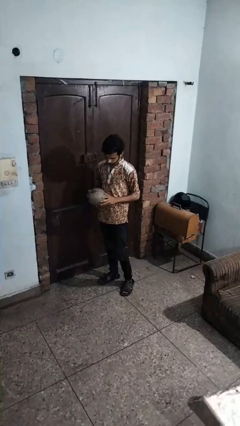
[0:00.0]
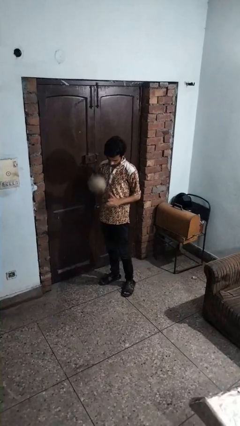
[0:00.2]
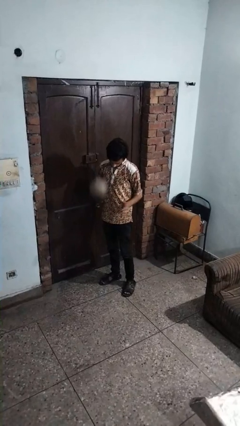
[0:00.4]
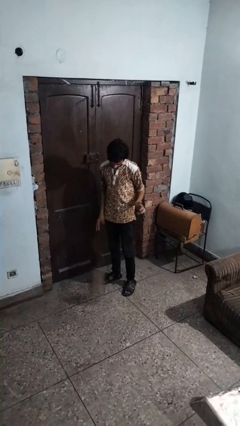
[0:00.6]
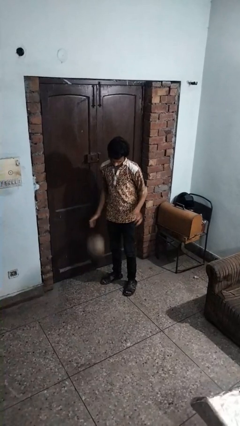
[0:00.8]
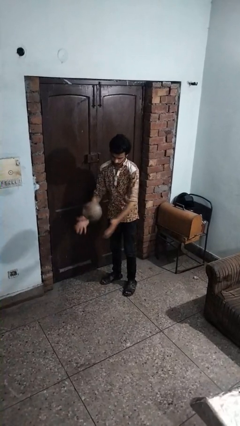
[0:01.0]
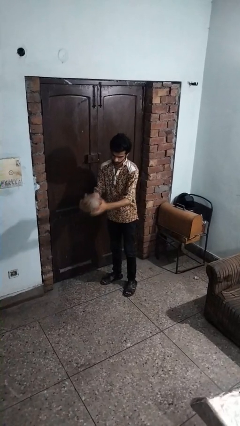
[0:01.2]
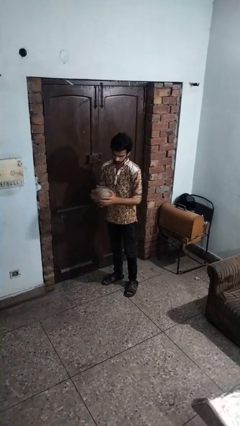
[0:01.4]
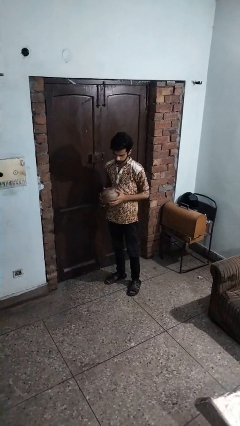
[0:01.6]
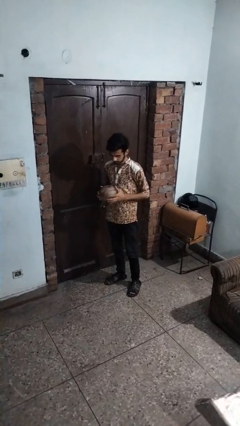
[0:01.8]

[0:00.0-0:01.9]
person bounces ball on floor

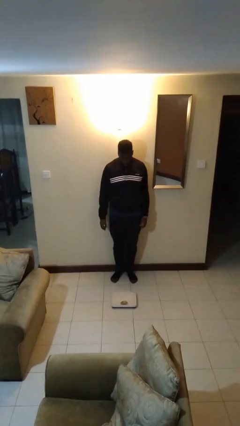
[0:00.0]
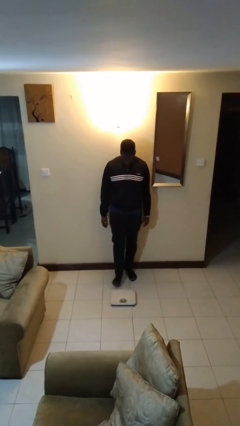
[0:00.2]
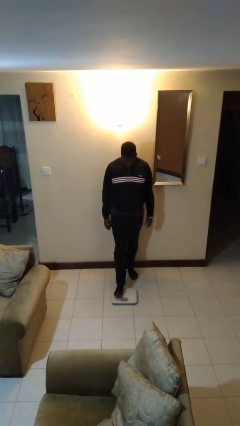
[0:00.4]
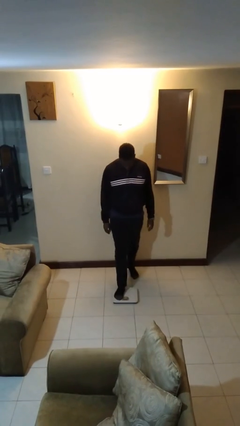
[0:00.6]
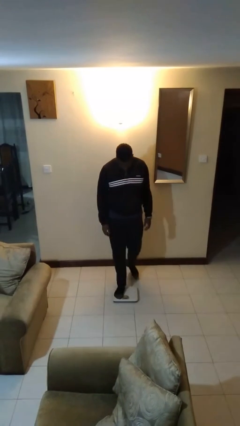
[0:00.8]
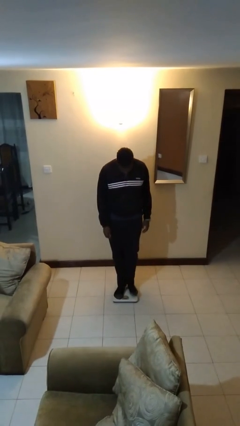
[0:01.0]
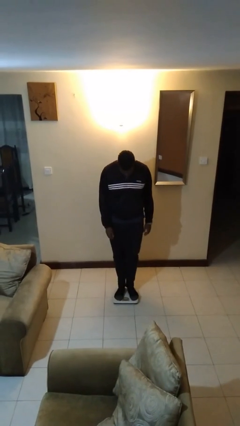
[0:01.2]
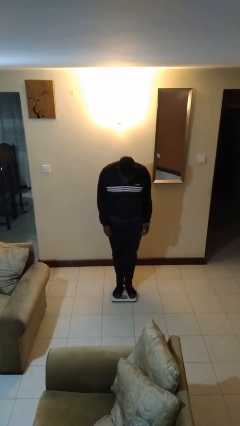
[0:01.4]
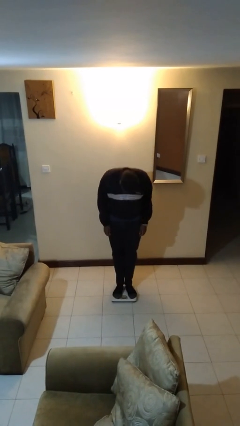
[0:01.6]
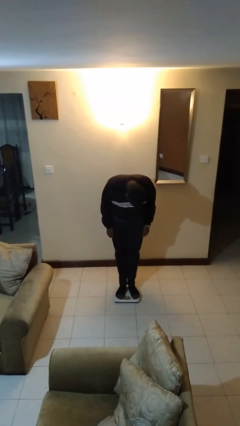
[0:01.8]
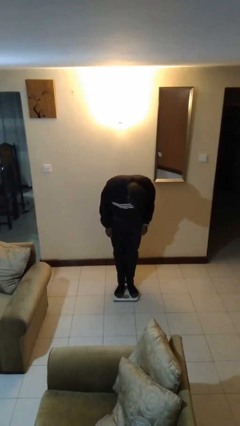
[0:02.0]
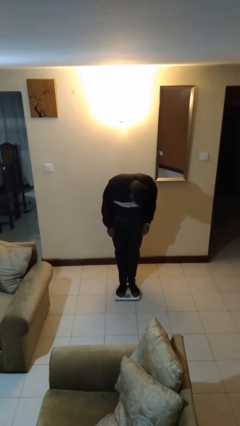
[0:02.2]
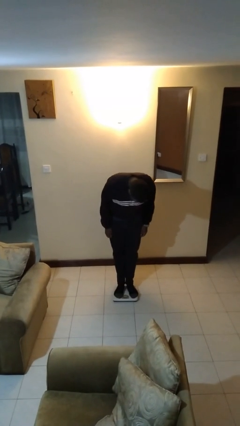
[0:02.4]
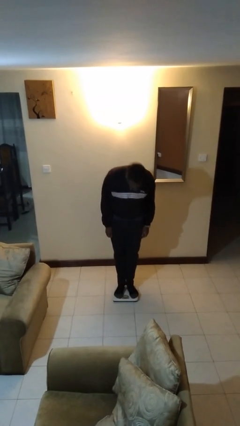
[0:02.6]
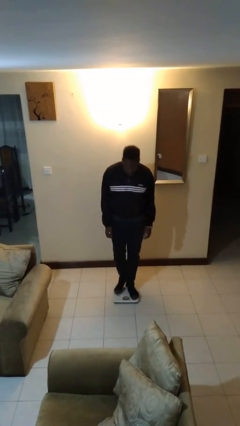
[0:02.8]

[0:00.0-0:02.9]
person uses bodyweight scale

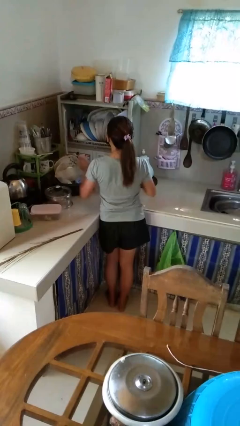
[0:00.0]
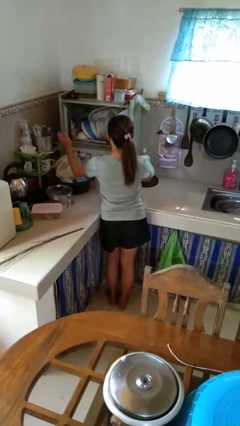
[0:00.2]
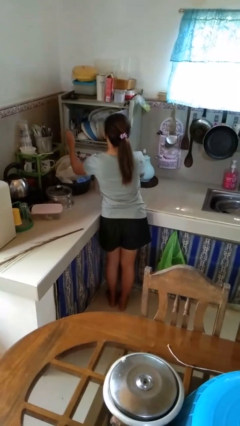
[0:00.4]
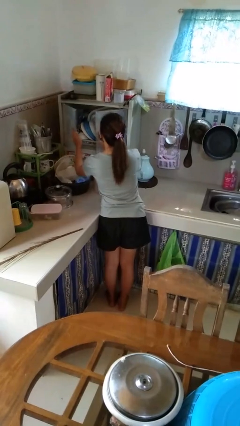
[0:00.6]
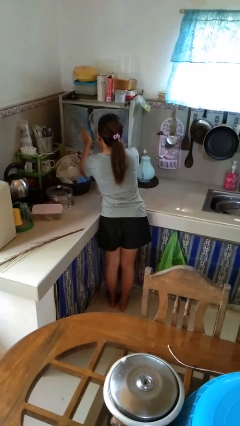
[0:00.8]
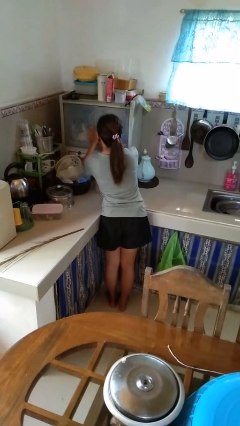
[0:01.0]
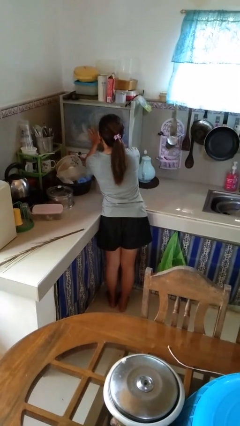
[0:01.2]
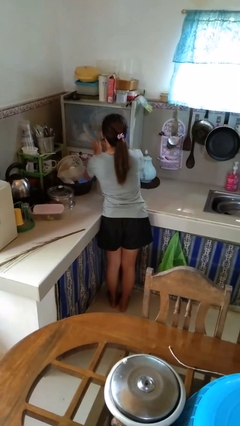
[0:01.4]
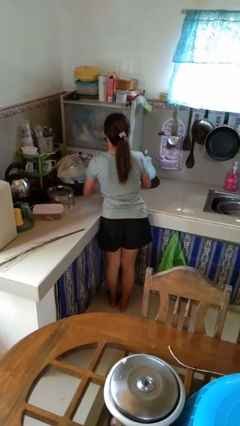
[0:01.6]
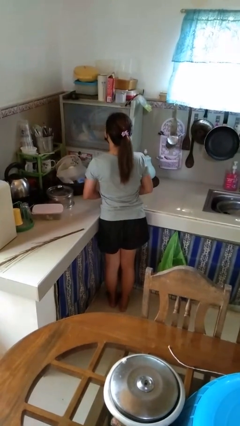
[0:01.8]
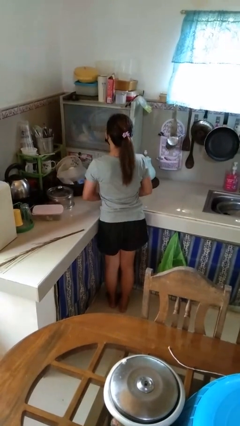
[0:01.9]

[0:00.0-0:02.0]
person closes kitchen drawer

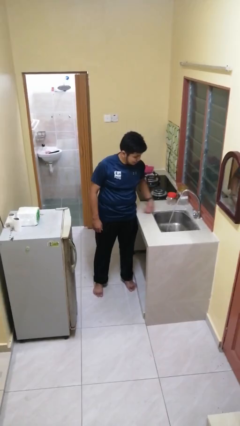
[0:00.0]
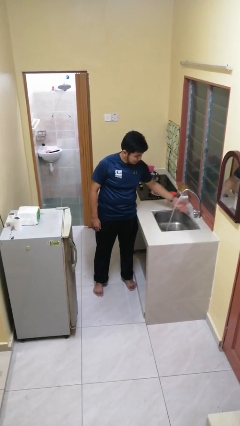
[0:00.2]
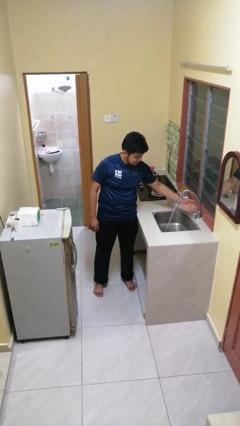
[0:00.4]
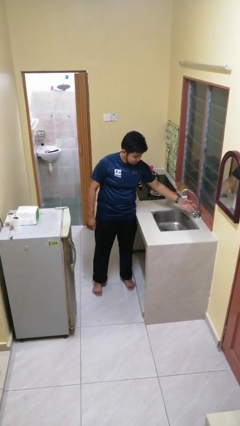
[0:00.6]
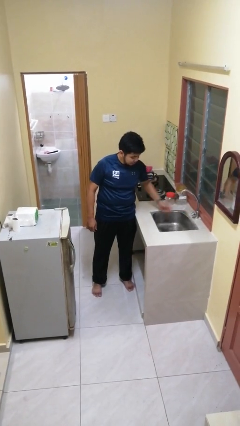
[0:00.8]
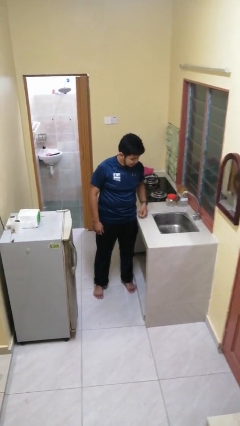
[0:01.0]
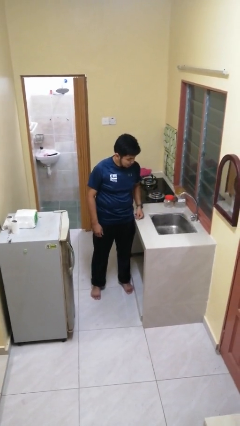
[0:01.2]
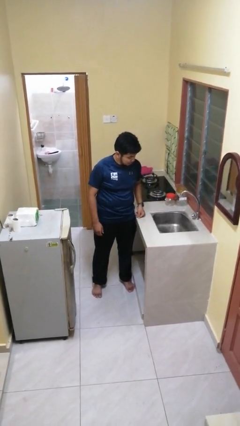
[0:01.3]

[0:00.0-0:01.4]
person turns off faucet

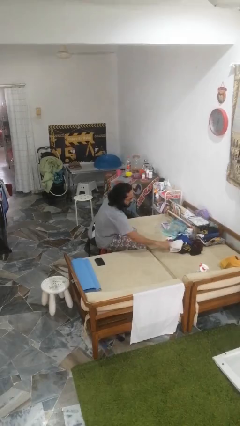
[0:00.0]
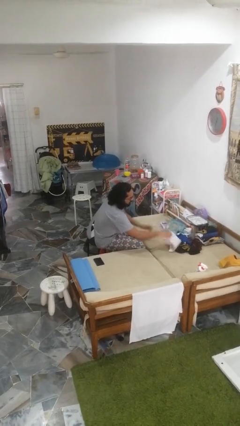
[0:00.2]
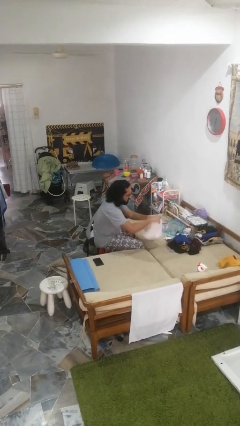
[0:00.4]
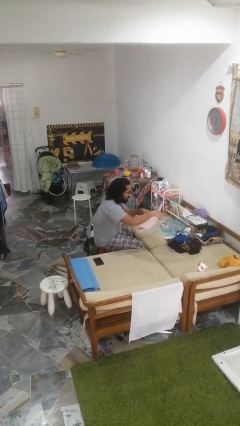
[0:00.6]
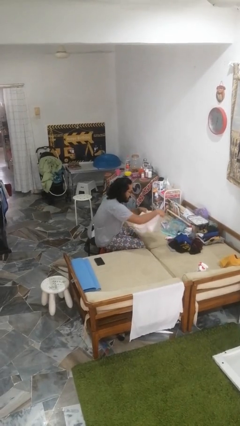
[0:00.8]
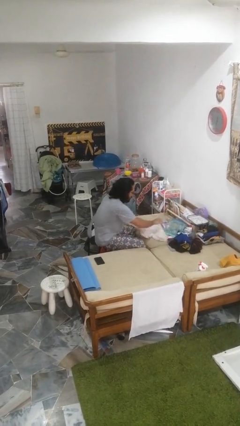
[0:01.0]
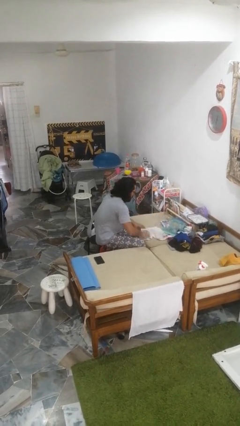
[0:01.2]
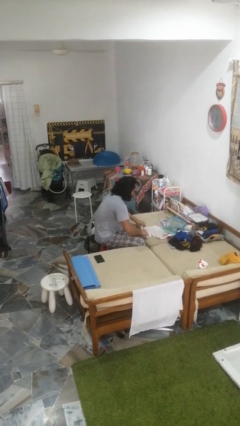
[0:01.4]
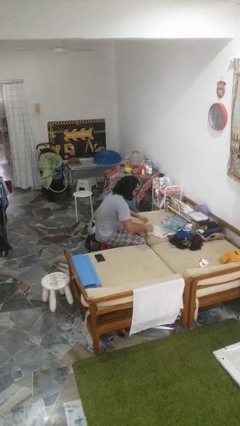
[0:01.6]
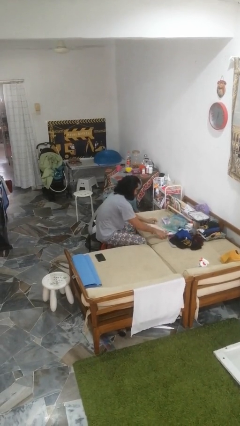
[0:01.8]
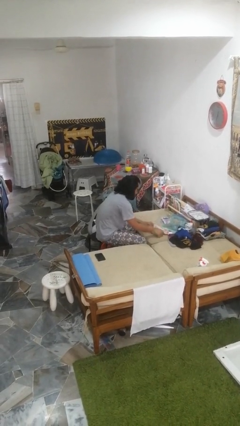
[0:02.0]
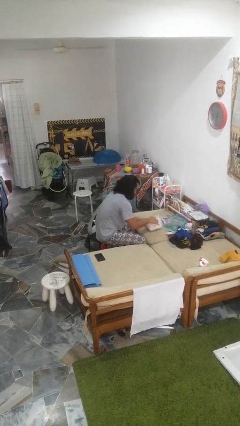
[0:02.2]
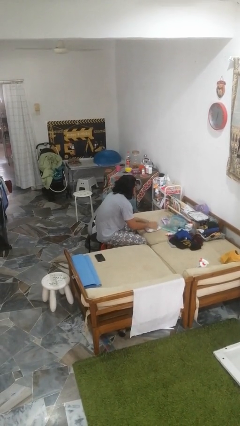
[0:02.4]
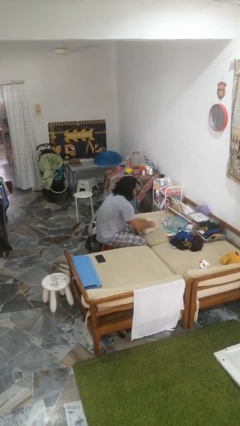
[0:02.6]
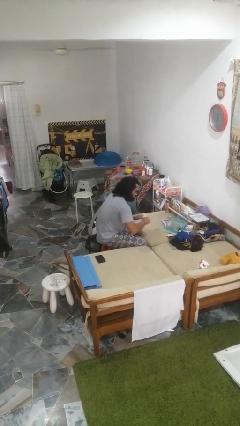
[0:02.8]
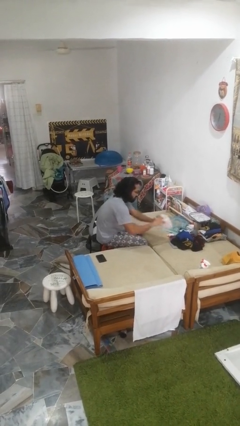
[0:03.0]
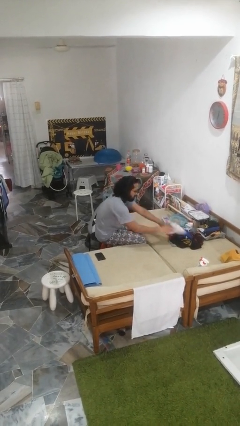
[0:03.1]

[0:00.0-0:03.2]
person folds pants

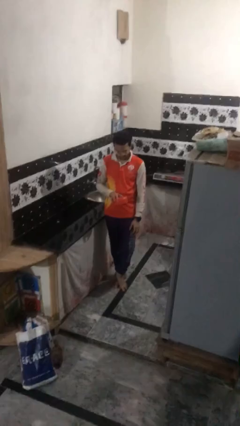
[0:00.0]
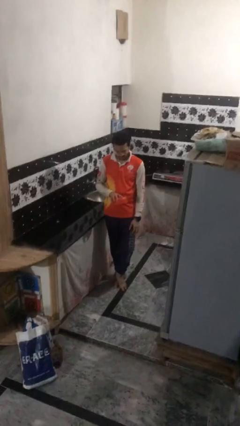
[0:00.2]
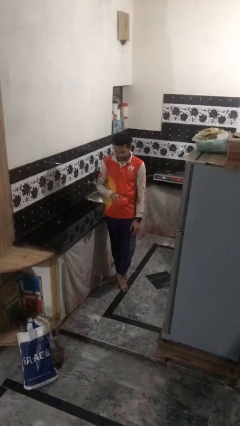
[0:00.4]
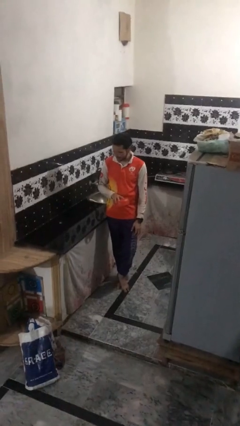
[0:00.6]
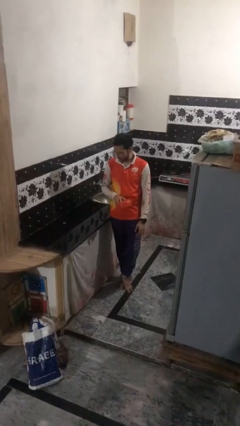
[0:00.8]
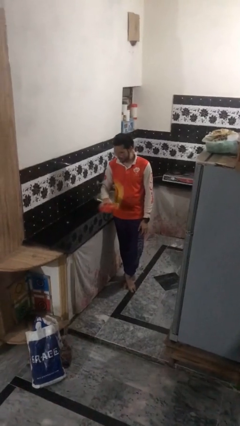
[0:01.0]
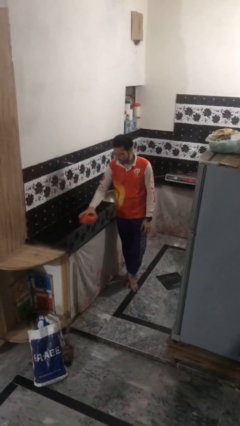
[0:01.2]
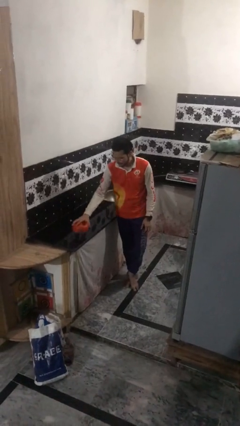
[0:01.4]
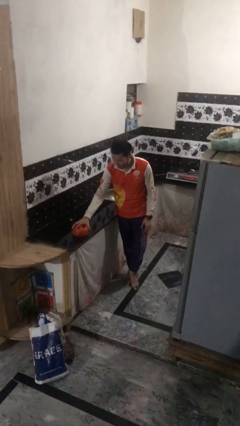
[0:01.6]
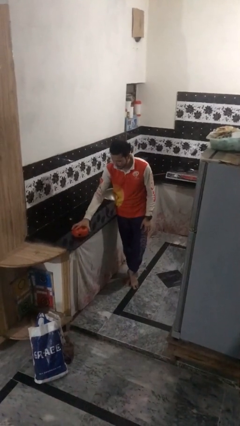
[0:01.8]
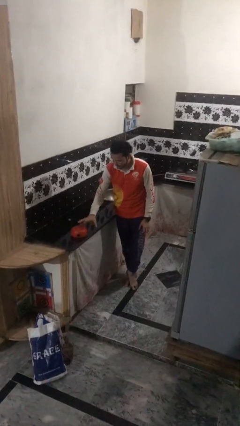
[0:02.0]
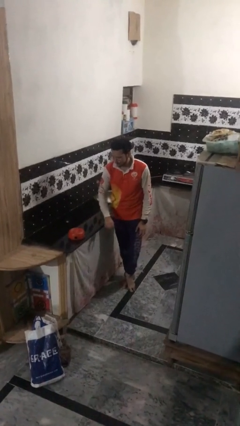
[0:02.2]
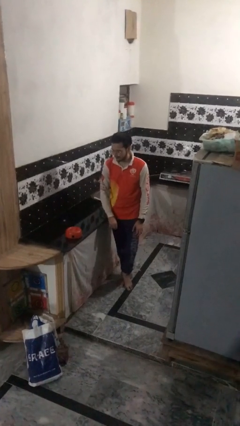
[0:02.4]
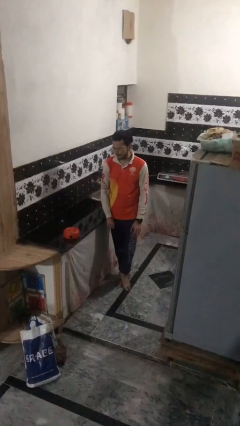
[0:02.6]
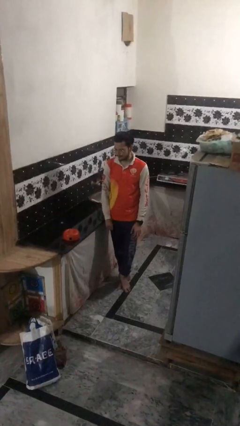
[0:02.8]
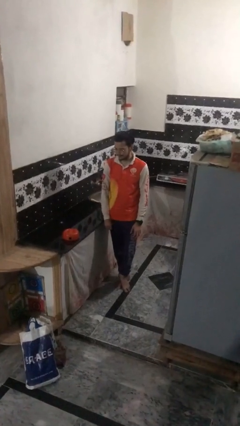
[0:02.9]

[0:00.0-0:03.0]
person puts down object on countertop

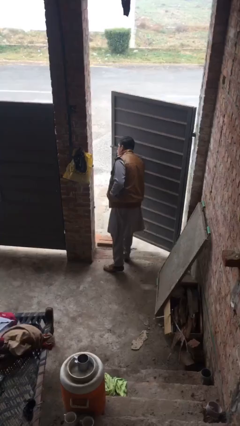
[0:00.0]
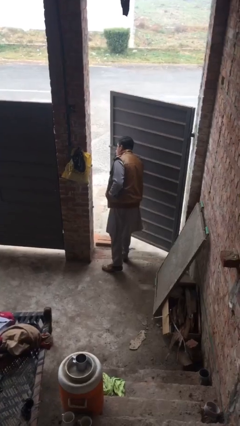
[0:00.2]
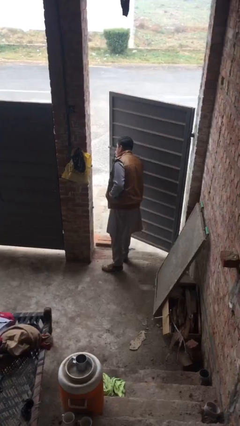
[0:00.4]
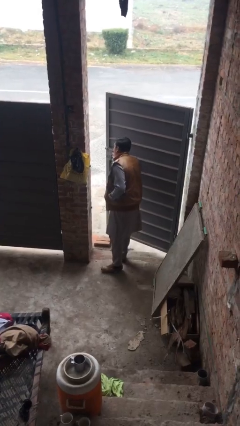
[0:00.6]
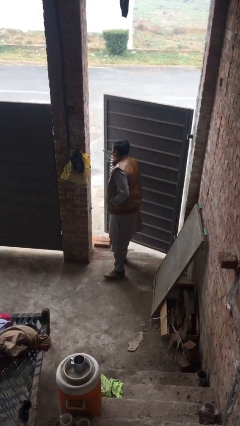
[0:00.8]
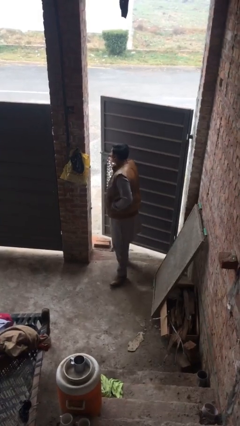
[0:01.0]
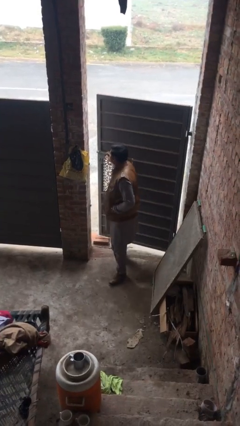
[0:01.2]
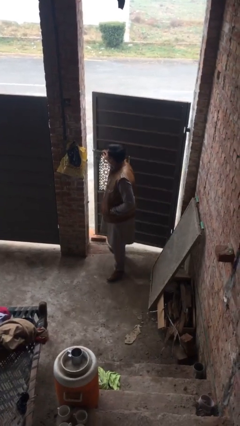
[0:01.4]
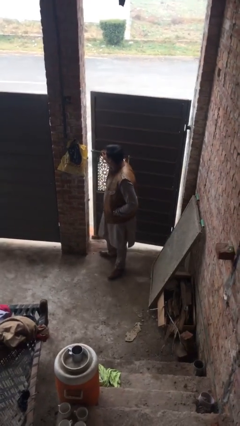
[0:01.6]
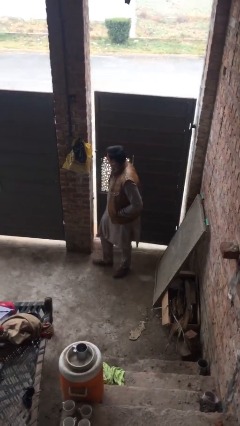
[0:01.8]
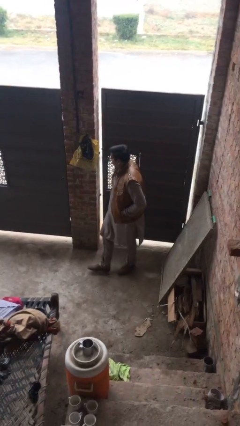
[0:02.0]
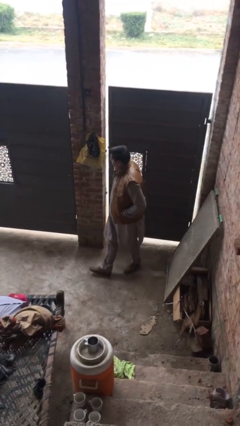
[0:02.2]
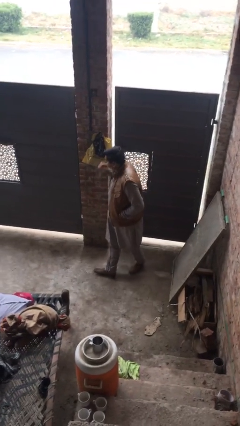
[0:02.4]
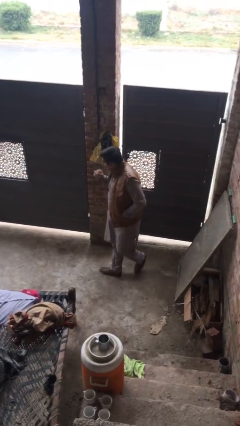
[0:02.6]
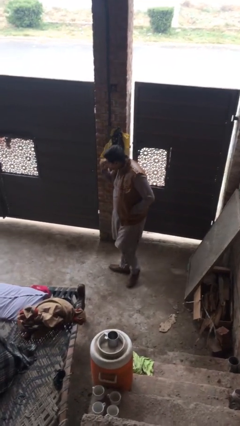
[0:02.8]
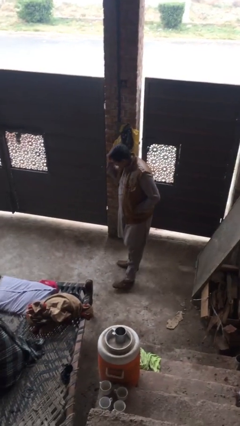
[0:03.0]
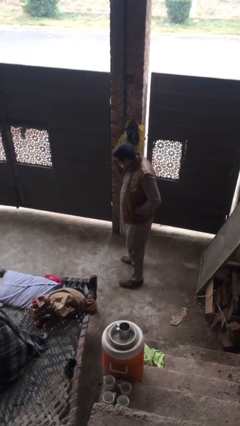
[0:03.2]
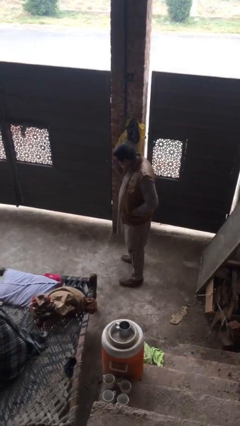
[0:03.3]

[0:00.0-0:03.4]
person closes facility door
